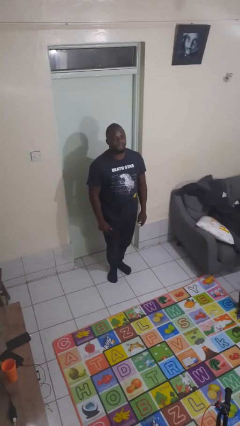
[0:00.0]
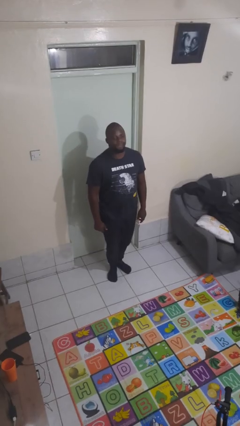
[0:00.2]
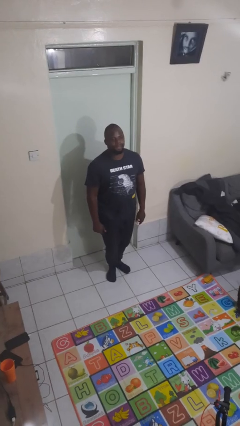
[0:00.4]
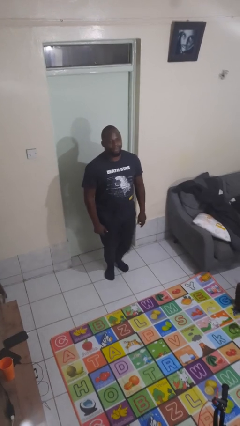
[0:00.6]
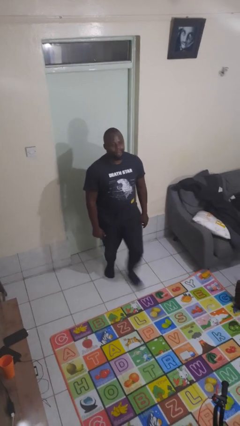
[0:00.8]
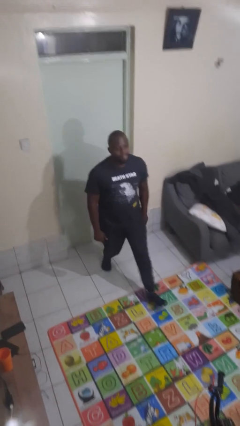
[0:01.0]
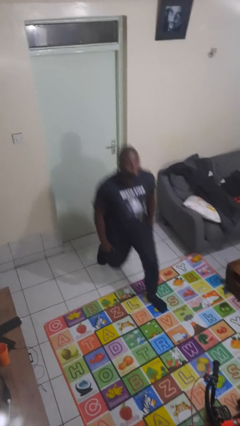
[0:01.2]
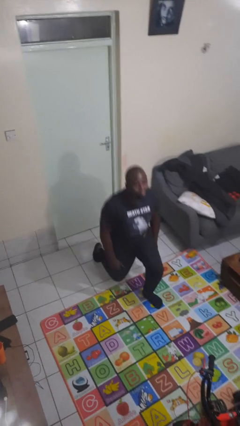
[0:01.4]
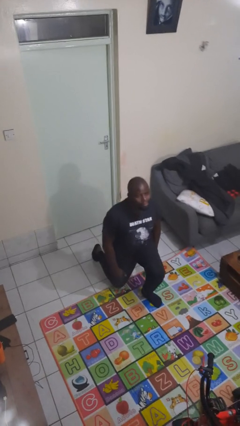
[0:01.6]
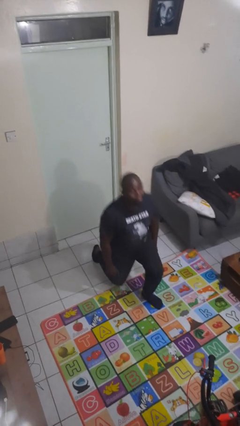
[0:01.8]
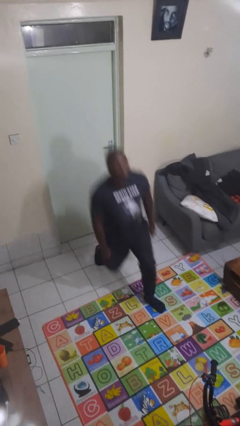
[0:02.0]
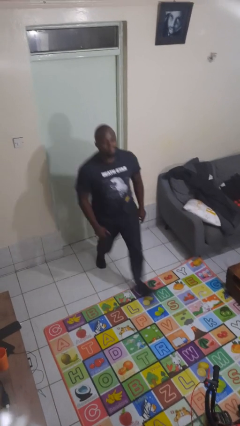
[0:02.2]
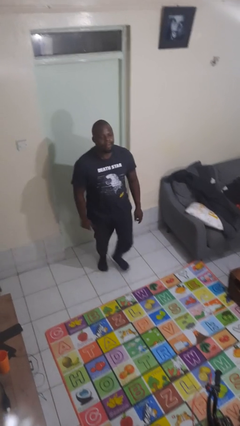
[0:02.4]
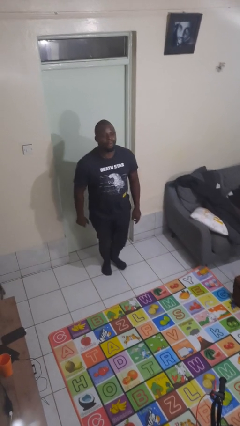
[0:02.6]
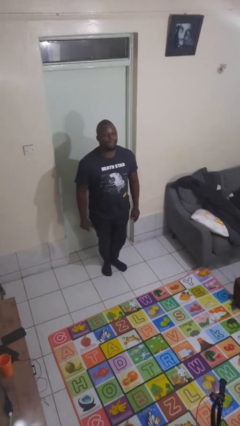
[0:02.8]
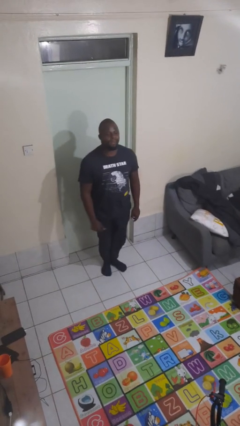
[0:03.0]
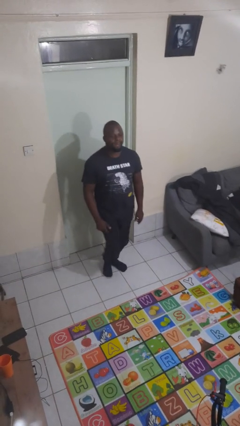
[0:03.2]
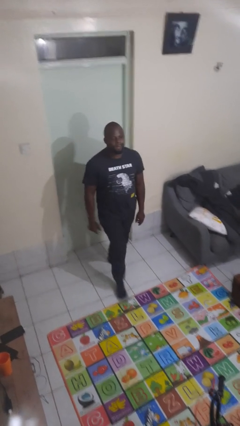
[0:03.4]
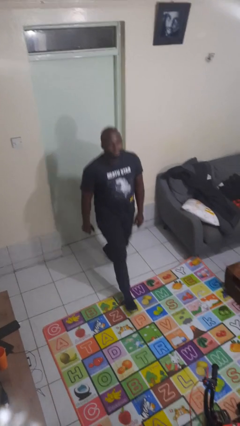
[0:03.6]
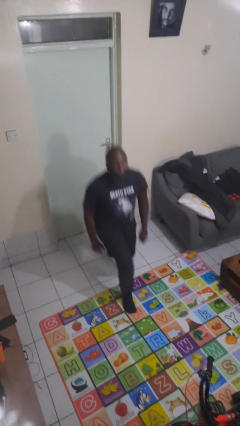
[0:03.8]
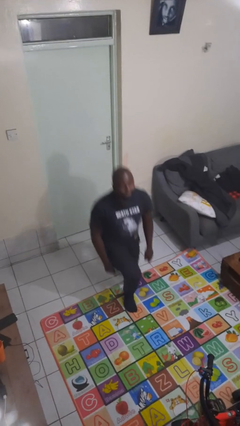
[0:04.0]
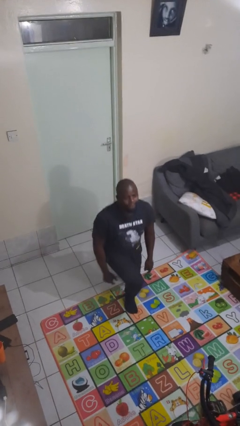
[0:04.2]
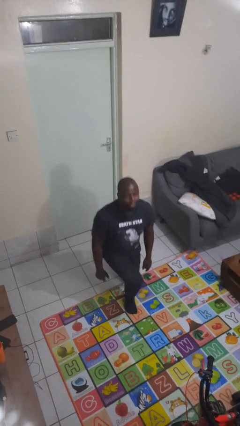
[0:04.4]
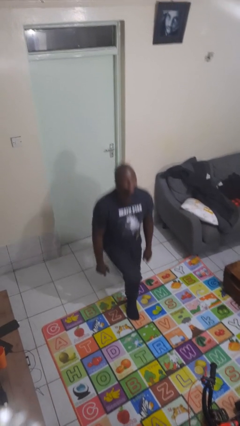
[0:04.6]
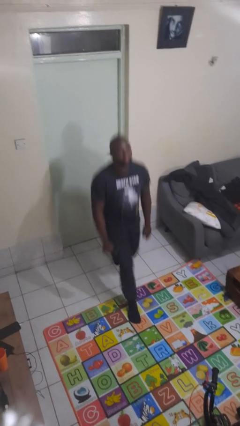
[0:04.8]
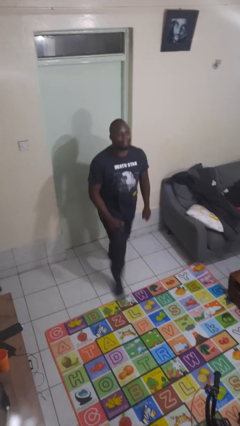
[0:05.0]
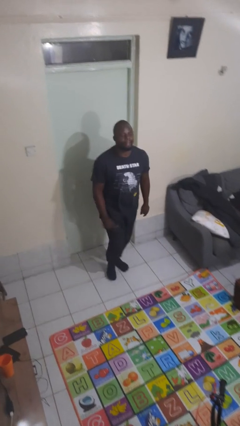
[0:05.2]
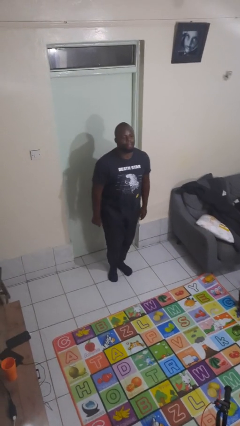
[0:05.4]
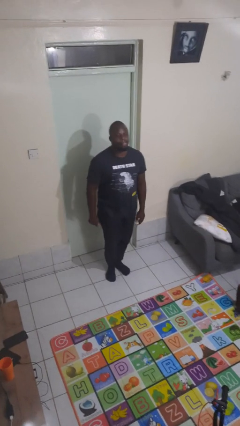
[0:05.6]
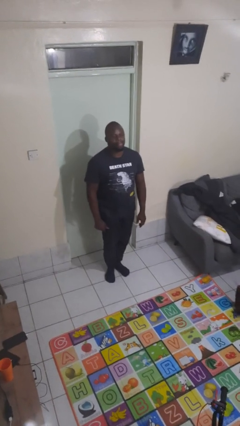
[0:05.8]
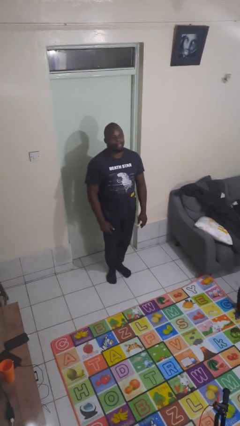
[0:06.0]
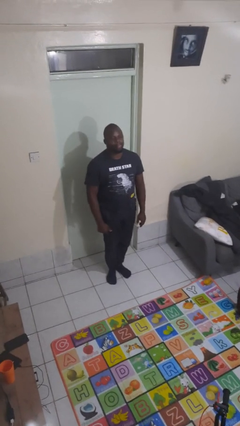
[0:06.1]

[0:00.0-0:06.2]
person exercises with lunges

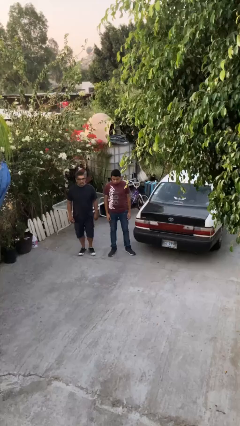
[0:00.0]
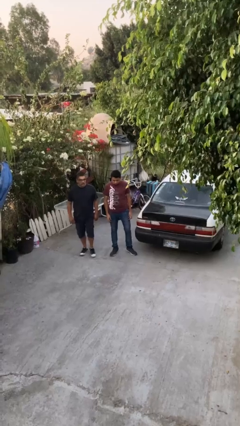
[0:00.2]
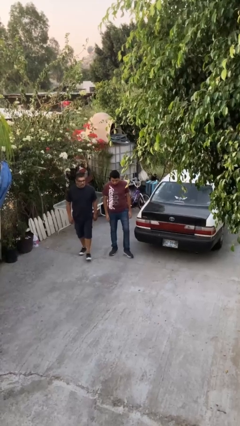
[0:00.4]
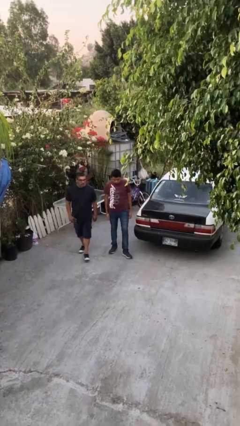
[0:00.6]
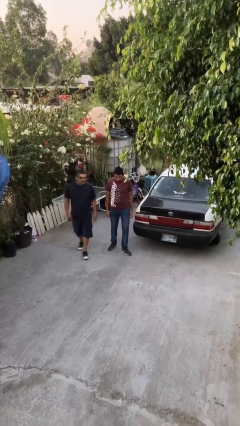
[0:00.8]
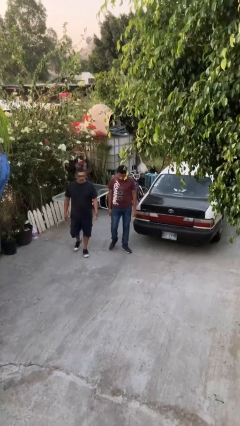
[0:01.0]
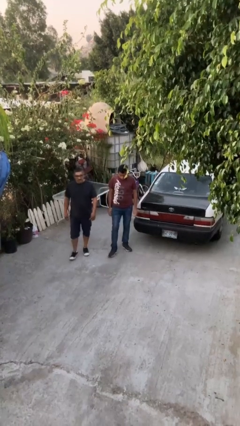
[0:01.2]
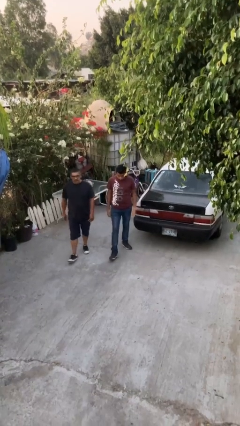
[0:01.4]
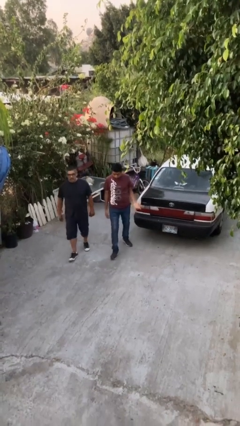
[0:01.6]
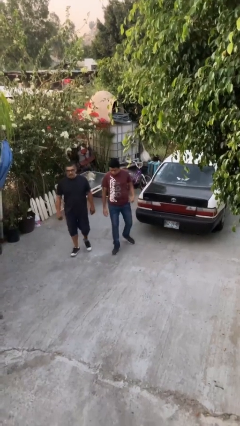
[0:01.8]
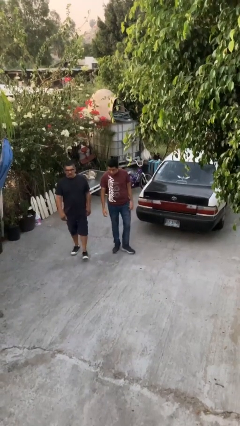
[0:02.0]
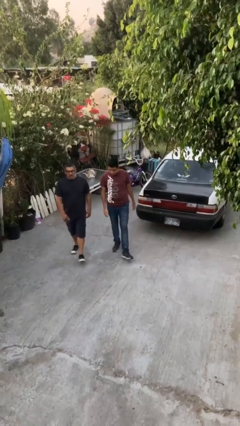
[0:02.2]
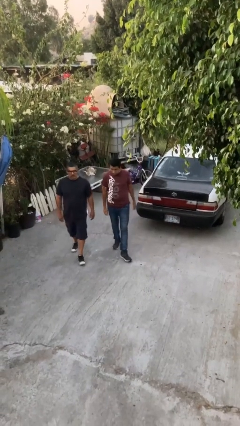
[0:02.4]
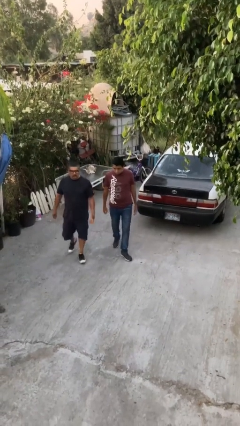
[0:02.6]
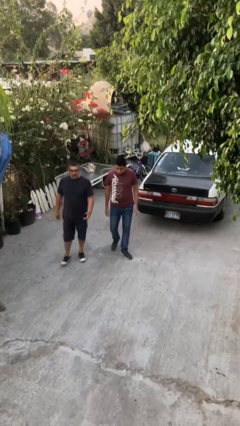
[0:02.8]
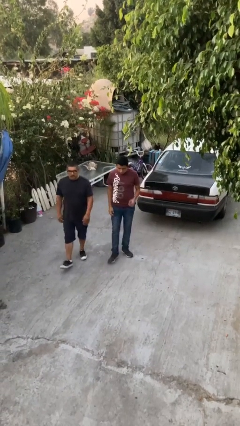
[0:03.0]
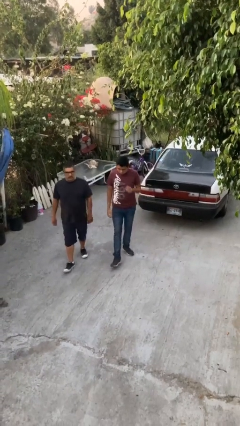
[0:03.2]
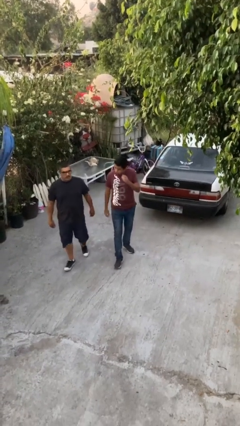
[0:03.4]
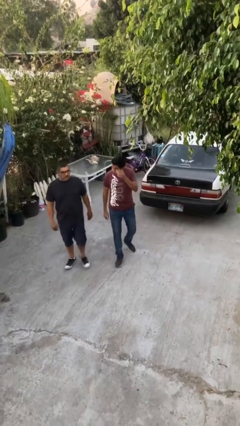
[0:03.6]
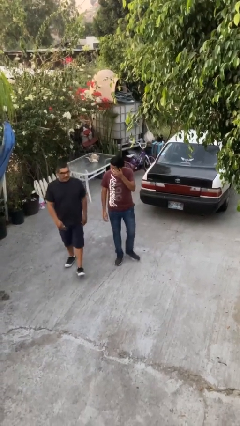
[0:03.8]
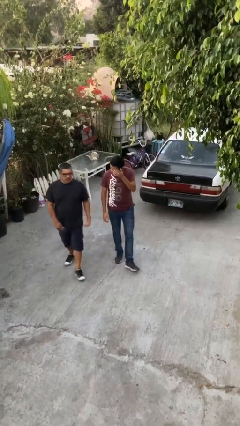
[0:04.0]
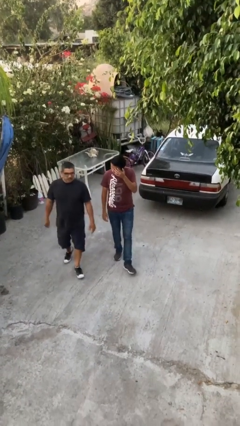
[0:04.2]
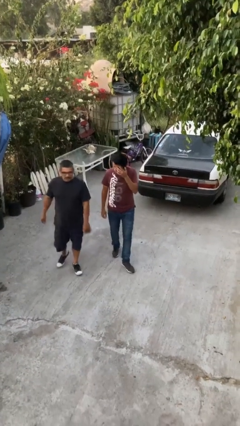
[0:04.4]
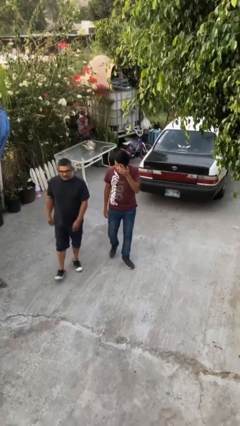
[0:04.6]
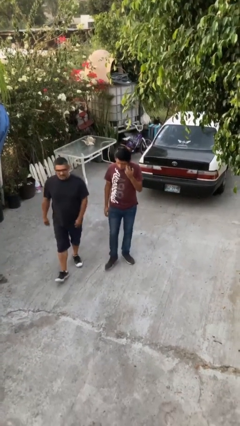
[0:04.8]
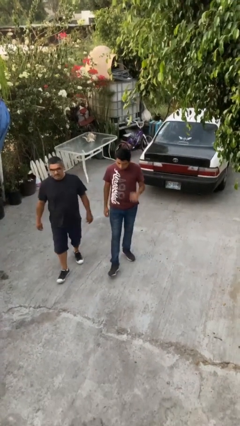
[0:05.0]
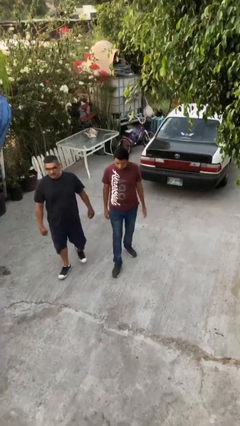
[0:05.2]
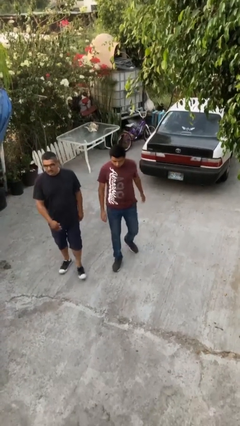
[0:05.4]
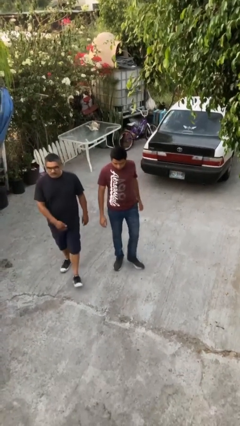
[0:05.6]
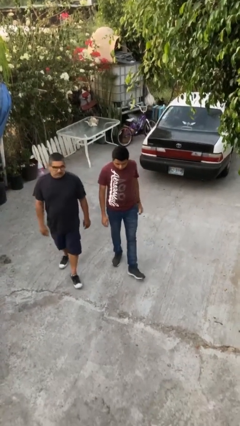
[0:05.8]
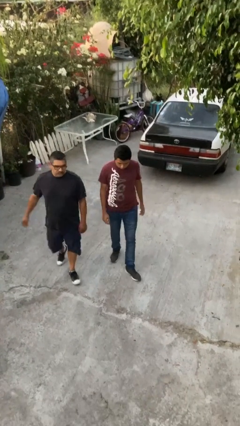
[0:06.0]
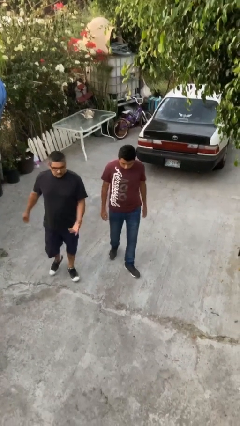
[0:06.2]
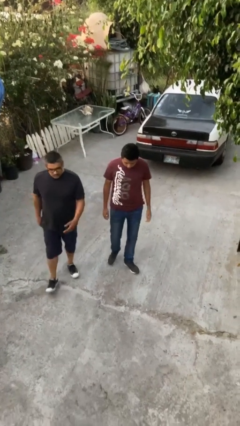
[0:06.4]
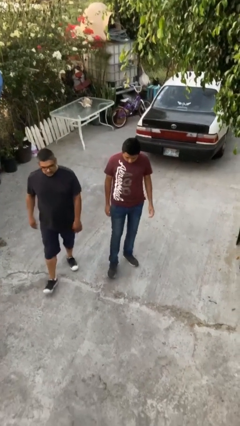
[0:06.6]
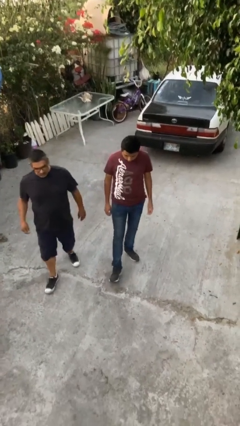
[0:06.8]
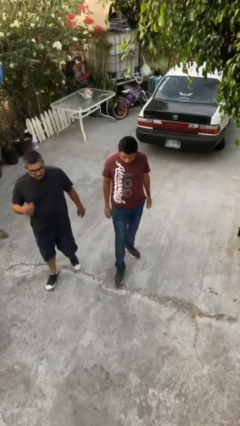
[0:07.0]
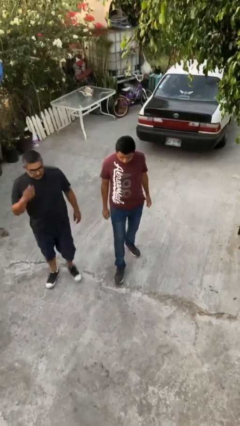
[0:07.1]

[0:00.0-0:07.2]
person talks to person

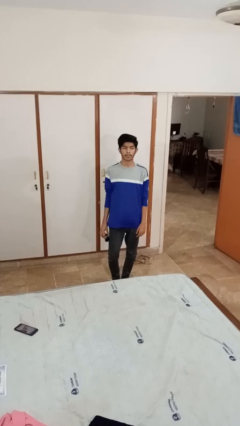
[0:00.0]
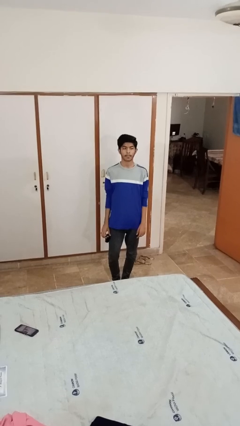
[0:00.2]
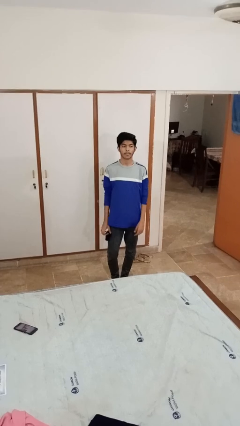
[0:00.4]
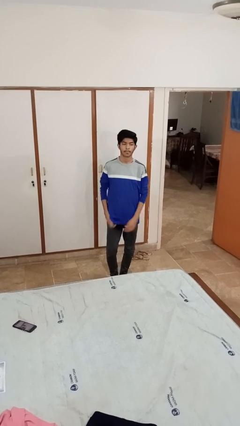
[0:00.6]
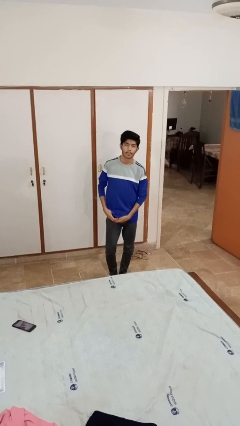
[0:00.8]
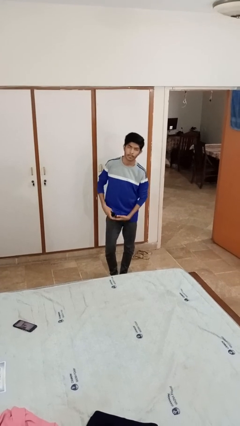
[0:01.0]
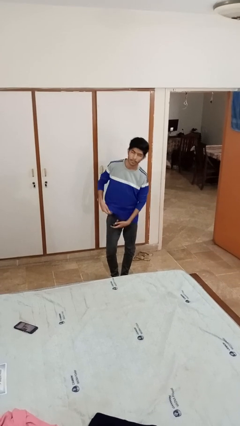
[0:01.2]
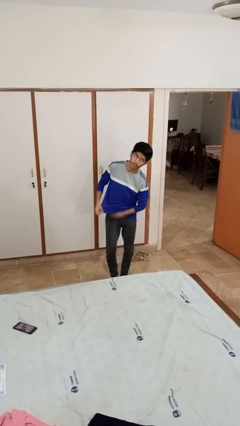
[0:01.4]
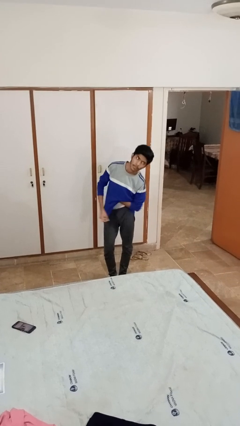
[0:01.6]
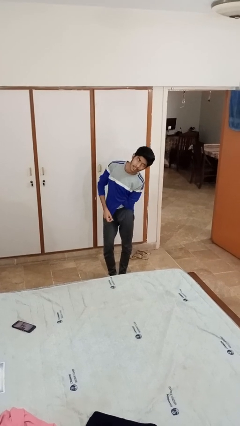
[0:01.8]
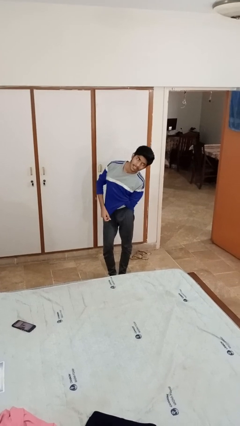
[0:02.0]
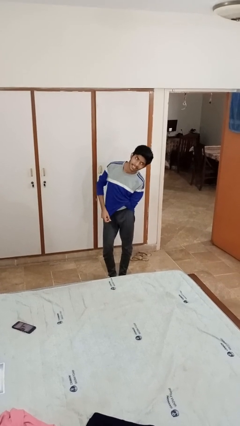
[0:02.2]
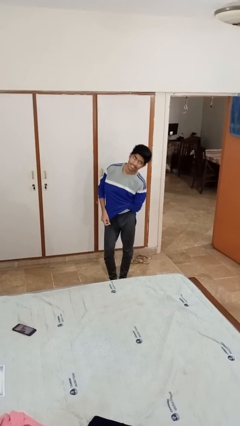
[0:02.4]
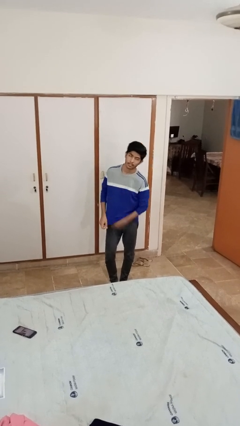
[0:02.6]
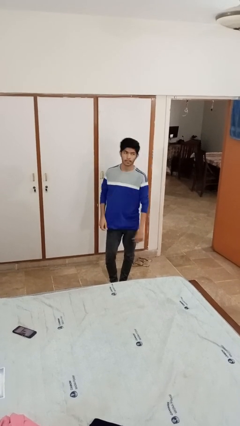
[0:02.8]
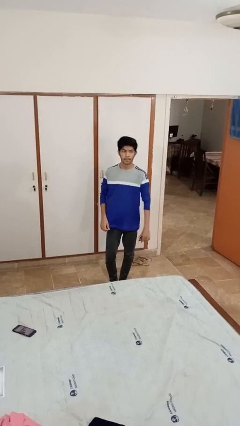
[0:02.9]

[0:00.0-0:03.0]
person applies deodorant

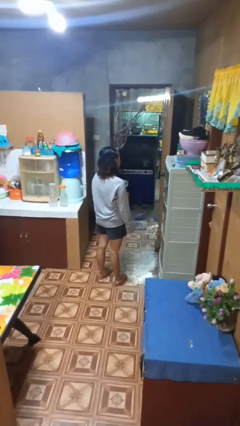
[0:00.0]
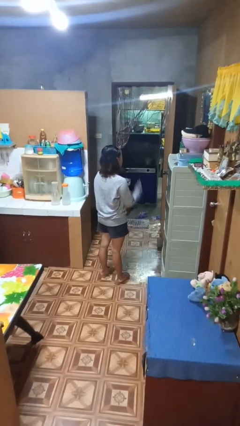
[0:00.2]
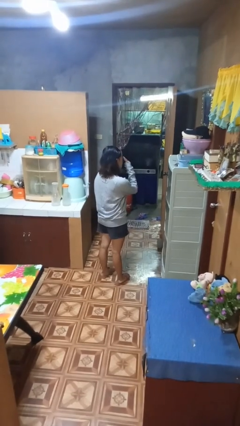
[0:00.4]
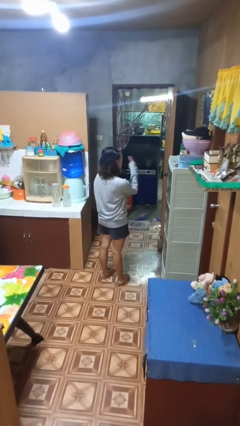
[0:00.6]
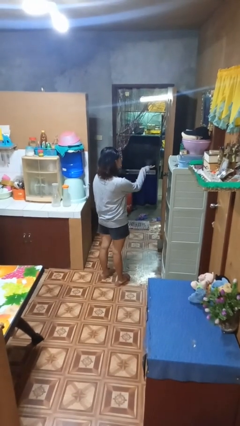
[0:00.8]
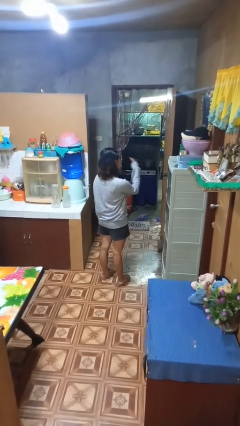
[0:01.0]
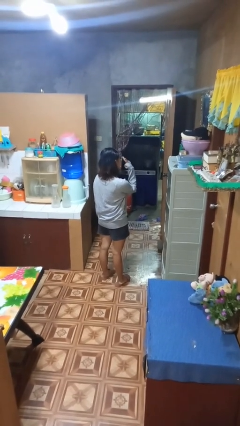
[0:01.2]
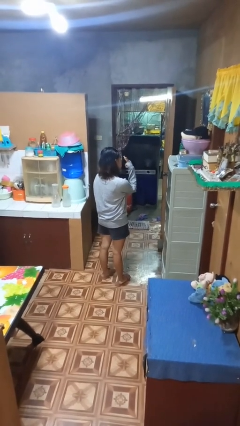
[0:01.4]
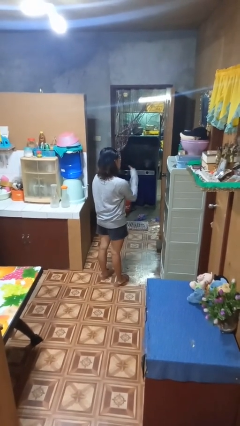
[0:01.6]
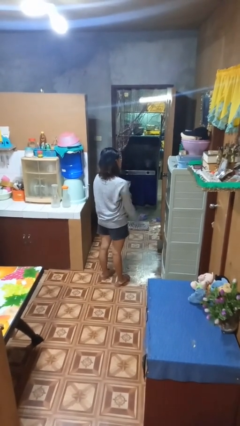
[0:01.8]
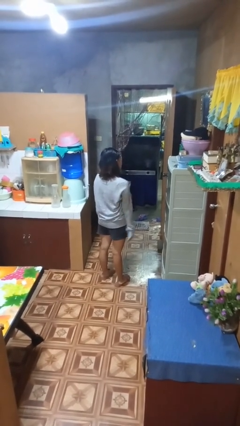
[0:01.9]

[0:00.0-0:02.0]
person gestures watch closely
